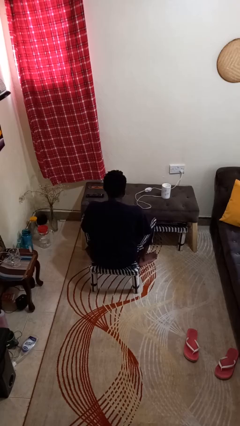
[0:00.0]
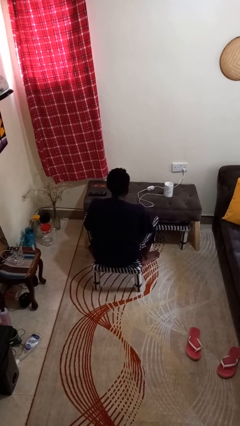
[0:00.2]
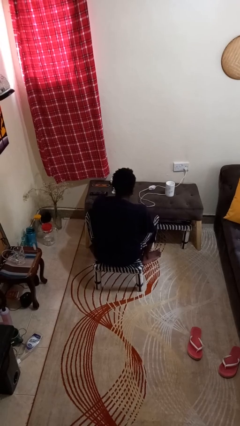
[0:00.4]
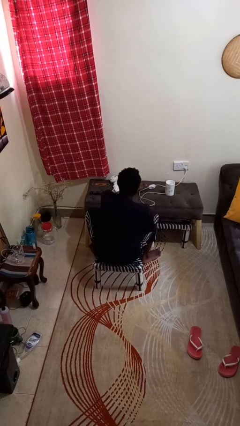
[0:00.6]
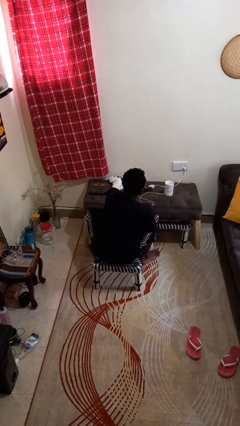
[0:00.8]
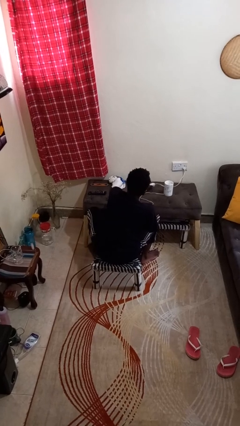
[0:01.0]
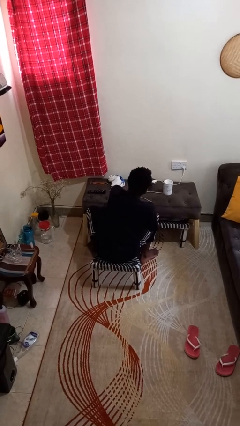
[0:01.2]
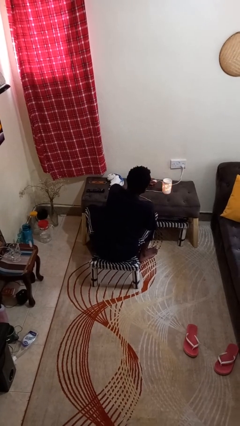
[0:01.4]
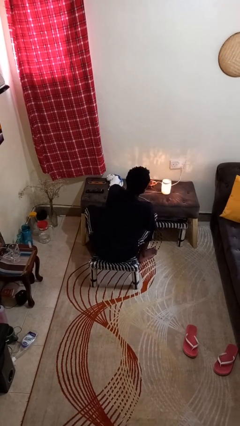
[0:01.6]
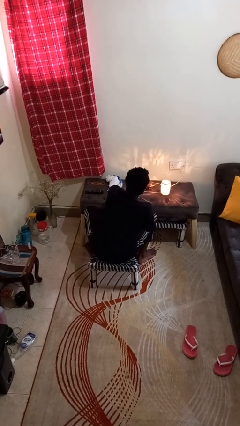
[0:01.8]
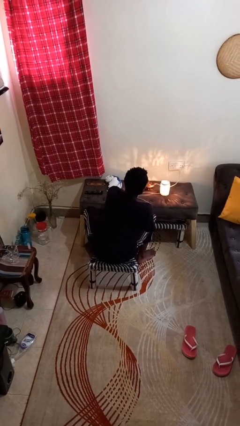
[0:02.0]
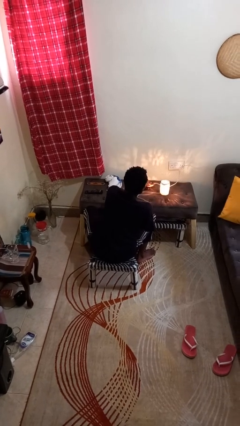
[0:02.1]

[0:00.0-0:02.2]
person turns on fan

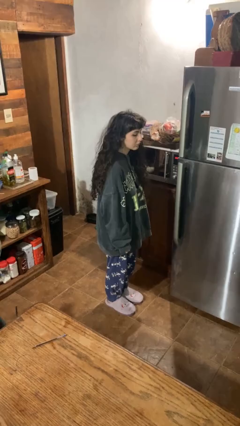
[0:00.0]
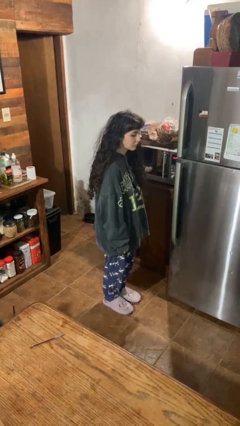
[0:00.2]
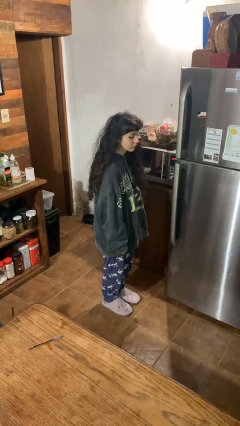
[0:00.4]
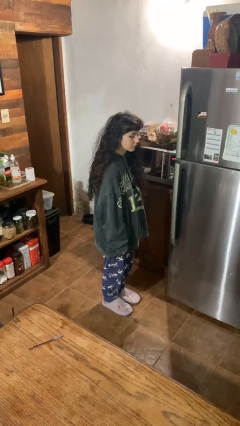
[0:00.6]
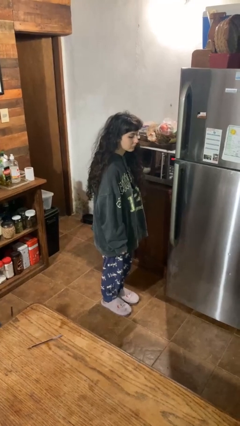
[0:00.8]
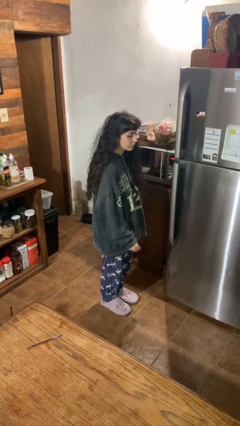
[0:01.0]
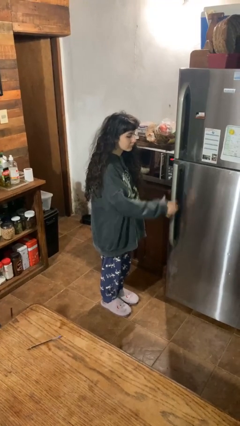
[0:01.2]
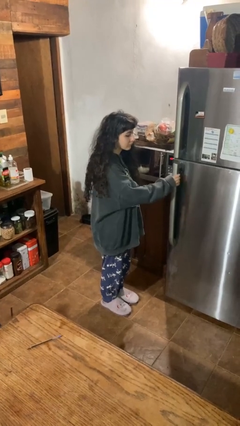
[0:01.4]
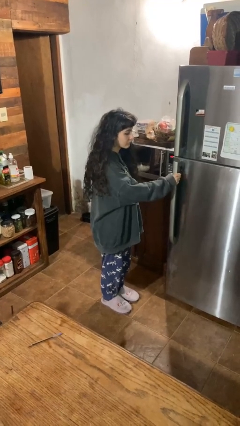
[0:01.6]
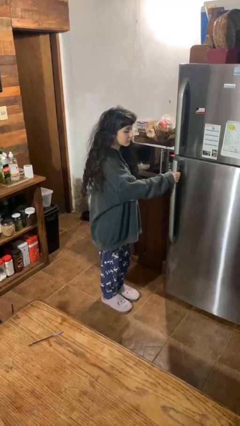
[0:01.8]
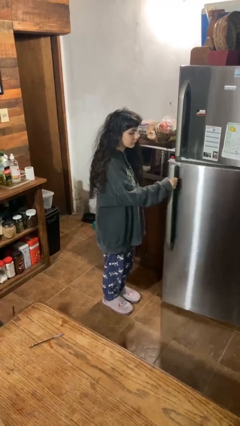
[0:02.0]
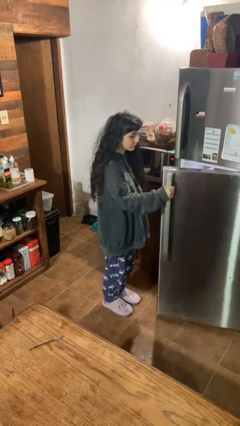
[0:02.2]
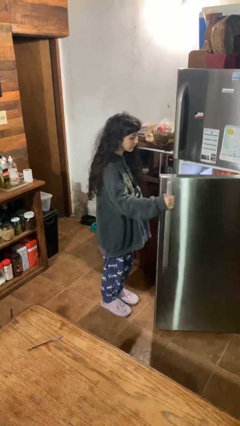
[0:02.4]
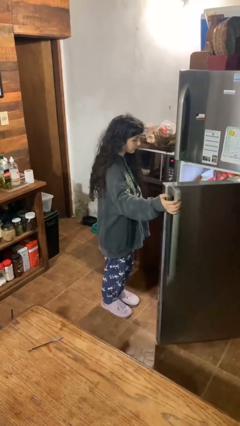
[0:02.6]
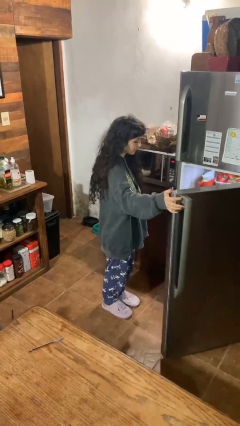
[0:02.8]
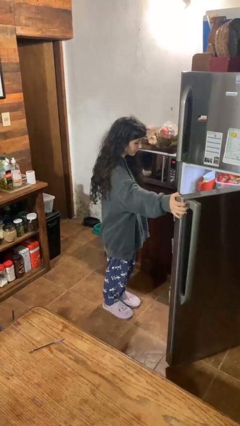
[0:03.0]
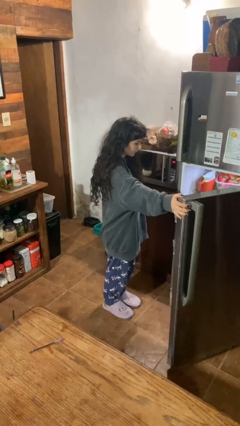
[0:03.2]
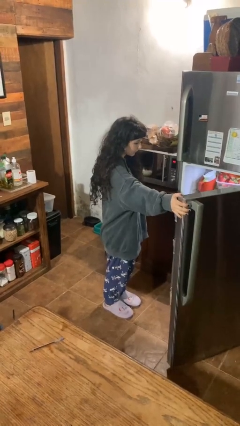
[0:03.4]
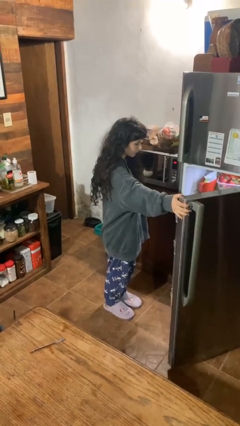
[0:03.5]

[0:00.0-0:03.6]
person opens refrigerator

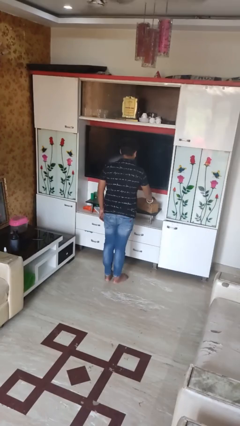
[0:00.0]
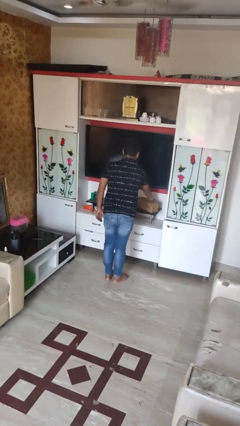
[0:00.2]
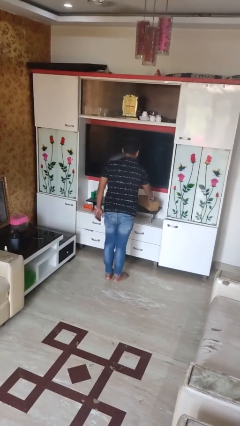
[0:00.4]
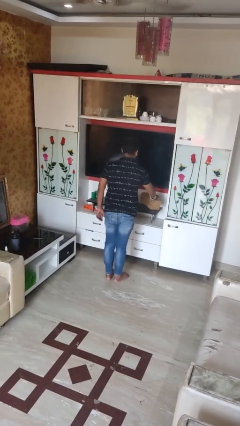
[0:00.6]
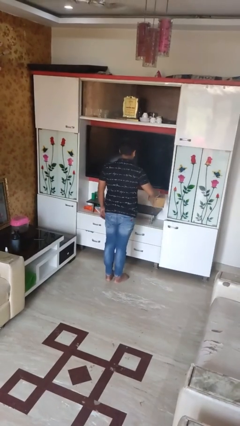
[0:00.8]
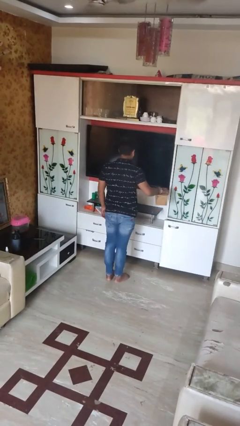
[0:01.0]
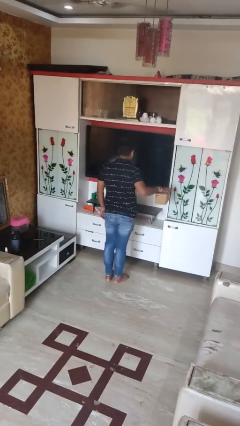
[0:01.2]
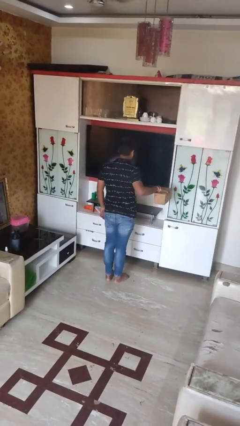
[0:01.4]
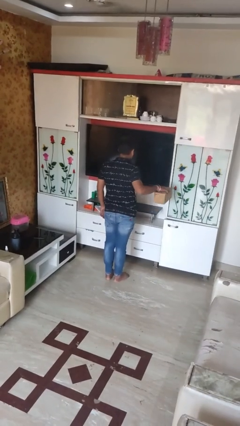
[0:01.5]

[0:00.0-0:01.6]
person picks up object from countertop

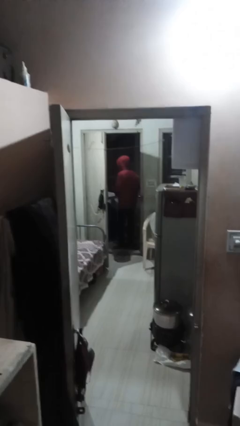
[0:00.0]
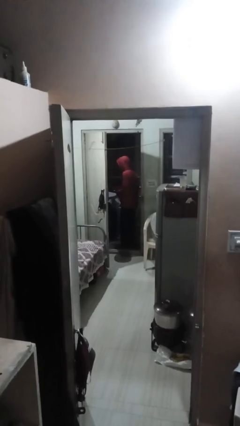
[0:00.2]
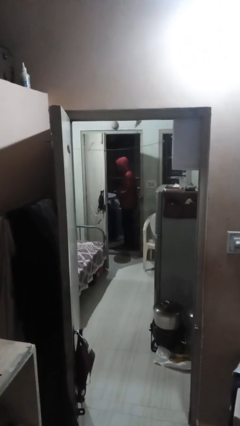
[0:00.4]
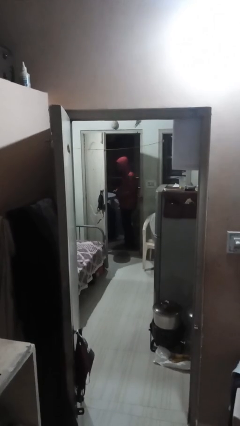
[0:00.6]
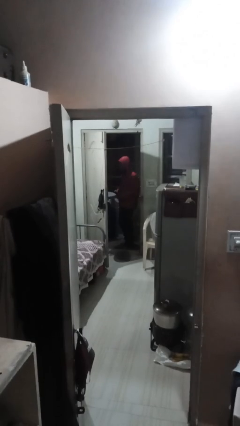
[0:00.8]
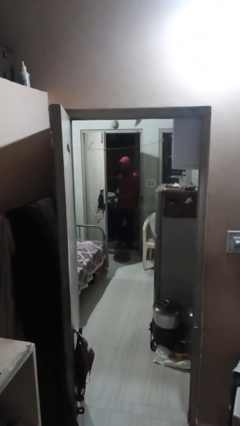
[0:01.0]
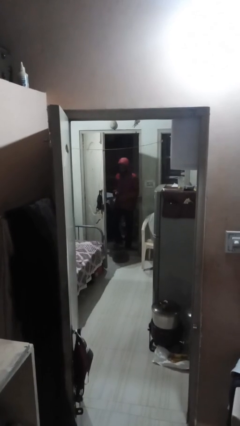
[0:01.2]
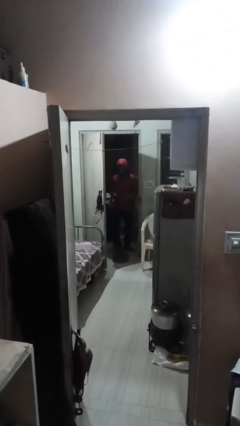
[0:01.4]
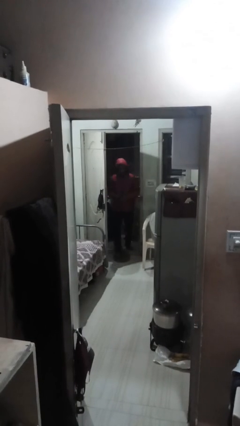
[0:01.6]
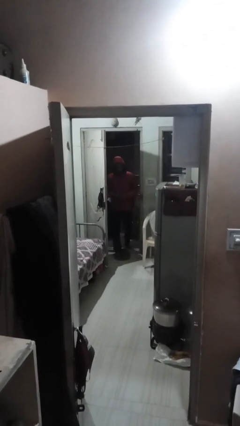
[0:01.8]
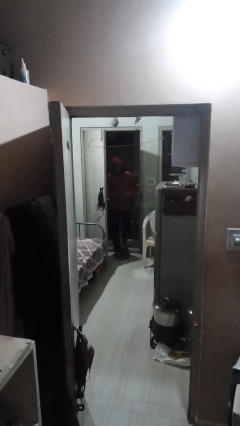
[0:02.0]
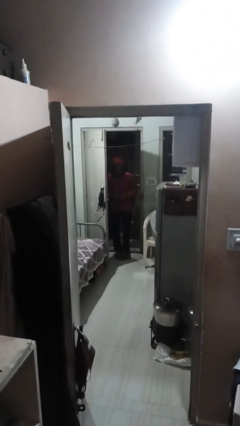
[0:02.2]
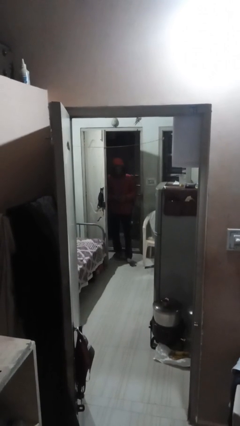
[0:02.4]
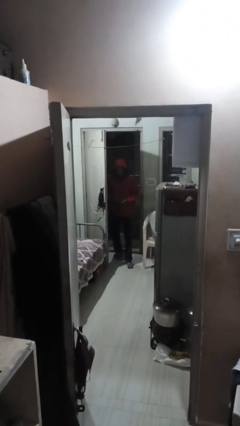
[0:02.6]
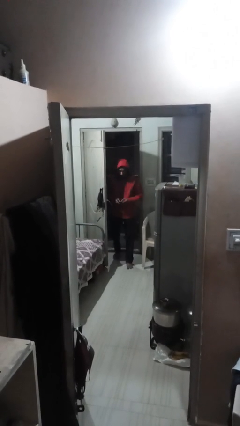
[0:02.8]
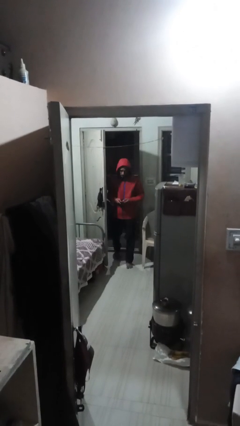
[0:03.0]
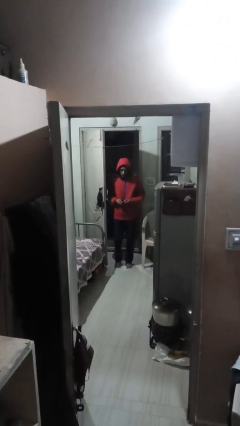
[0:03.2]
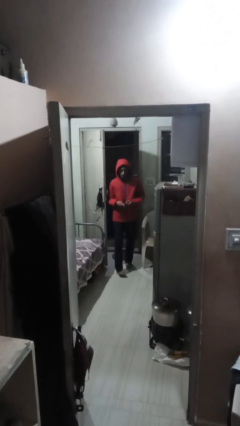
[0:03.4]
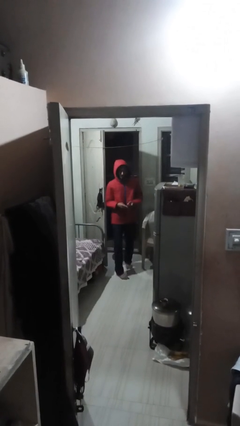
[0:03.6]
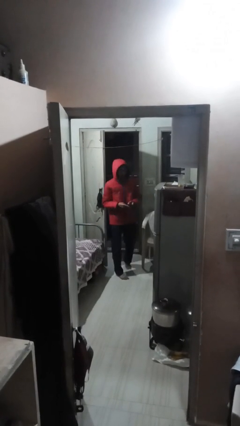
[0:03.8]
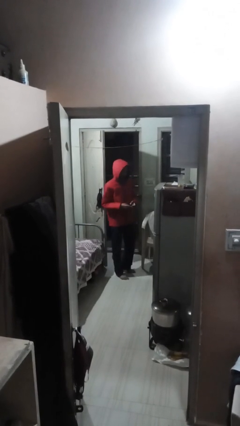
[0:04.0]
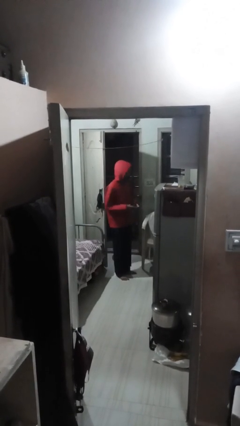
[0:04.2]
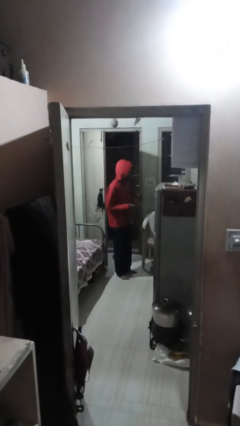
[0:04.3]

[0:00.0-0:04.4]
person enters scene through structure

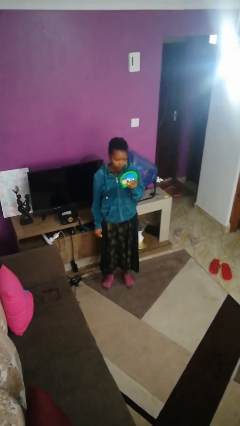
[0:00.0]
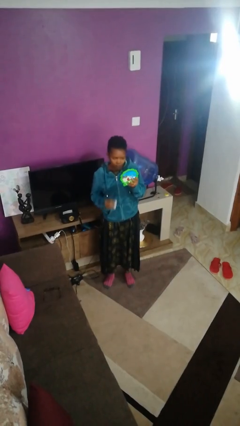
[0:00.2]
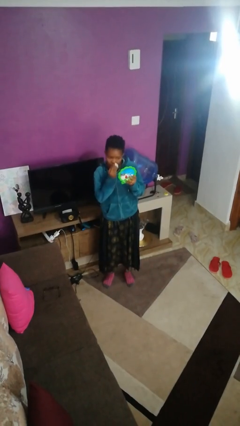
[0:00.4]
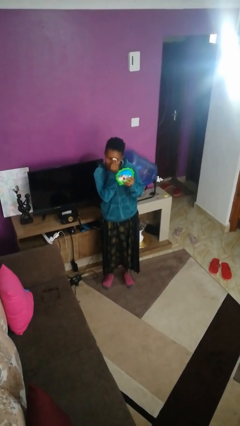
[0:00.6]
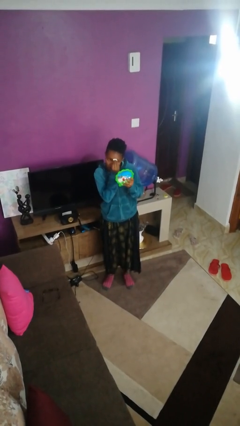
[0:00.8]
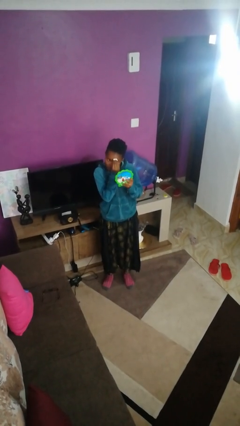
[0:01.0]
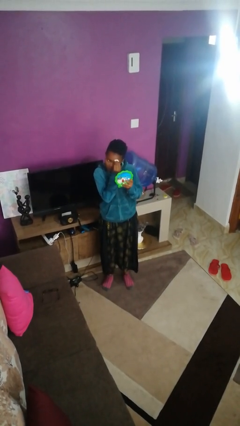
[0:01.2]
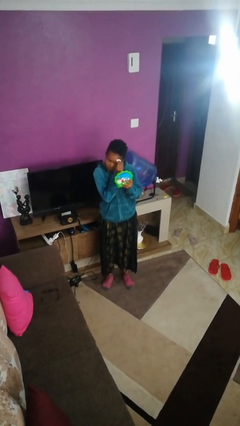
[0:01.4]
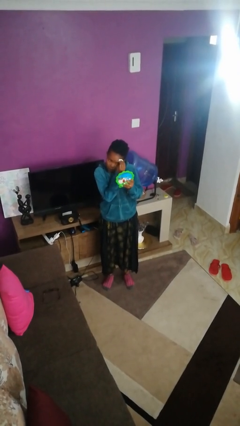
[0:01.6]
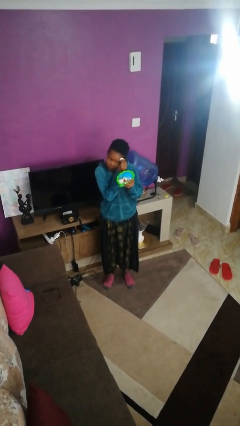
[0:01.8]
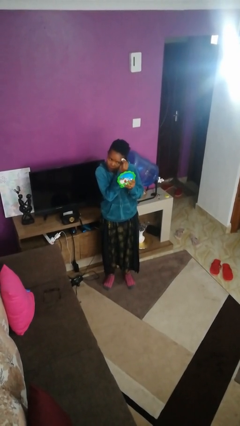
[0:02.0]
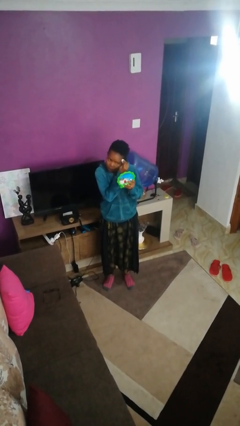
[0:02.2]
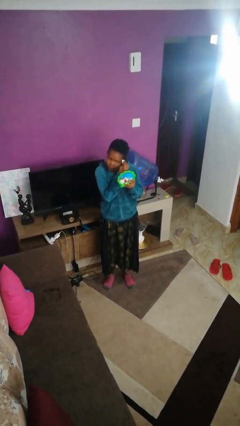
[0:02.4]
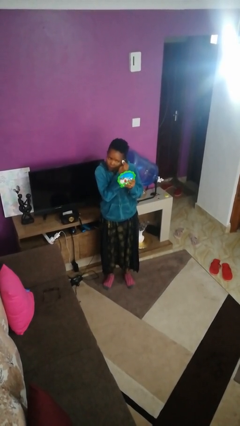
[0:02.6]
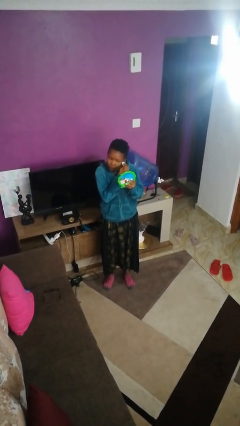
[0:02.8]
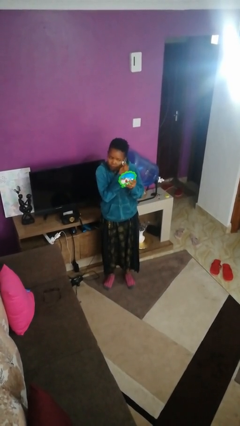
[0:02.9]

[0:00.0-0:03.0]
person applies foundation makeup

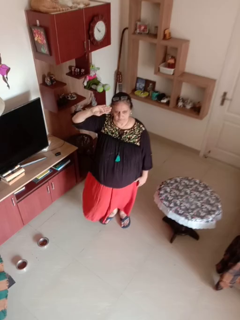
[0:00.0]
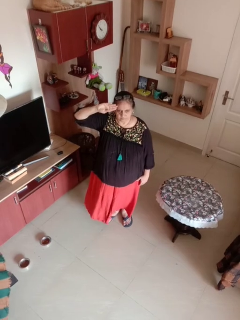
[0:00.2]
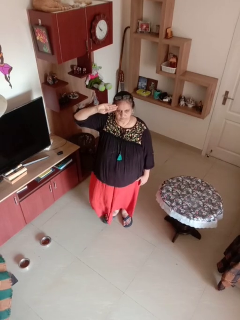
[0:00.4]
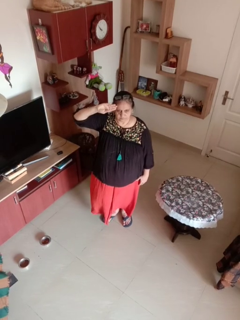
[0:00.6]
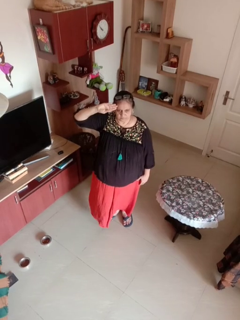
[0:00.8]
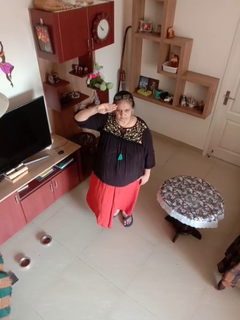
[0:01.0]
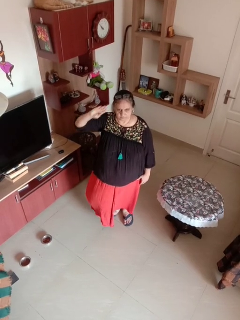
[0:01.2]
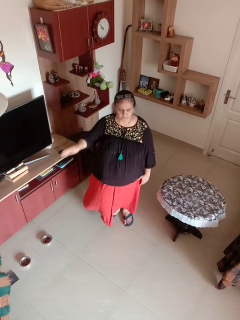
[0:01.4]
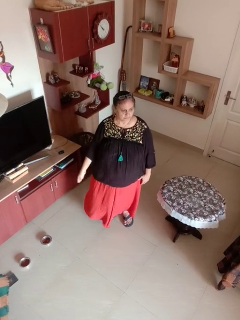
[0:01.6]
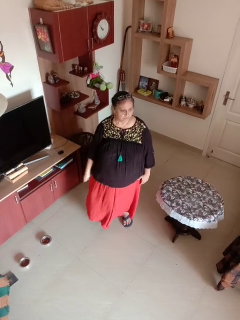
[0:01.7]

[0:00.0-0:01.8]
person salutes

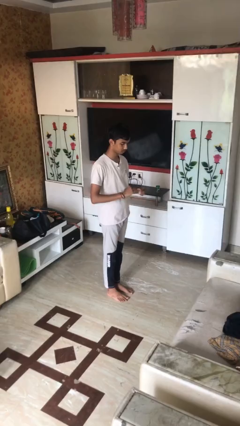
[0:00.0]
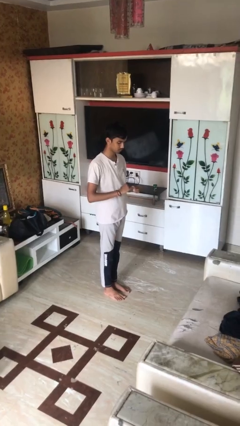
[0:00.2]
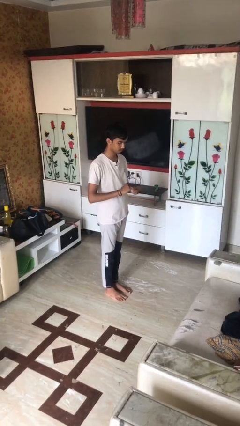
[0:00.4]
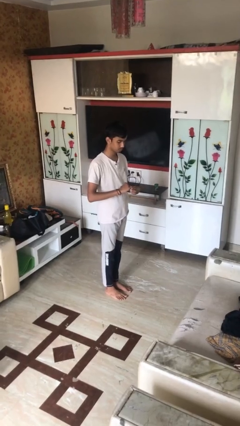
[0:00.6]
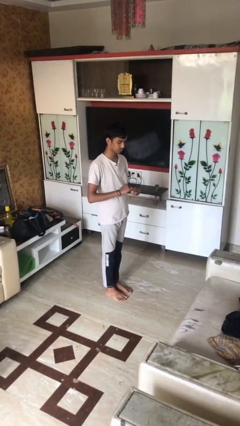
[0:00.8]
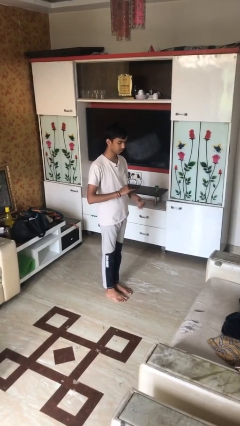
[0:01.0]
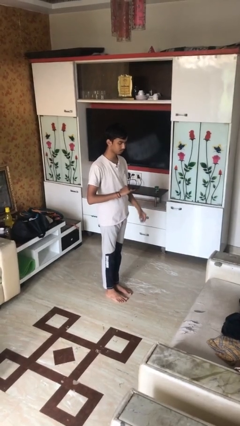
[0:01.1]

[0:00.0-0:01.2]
person puts on ring
